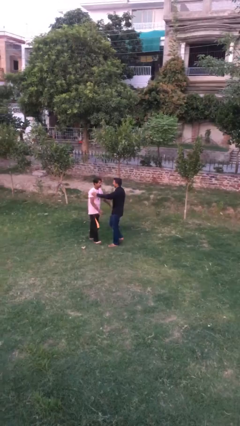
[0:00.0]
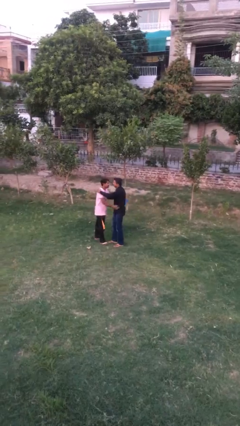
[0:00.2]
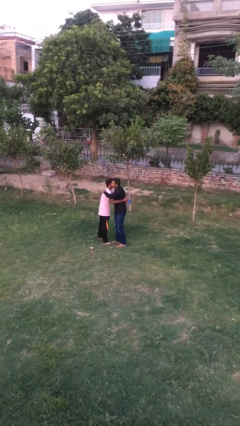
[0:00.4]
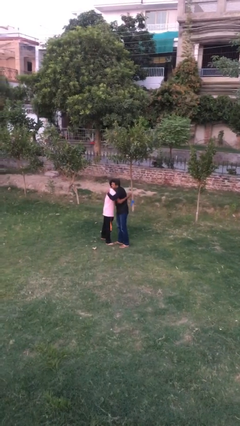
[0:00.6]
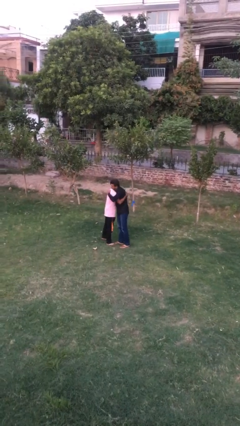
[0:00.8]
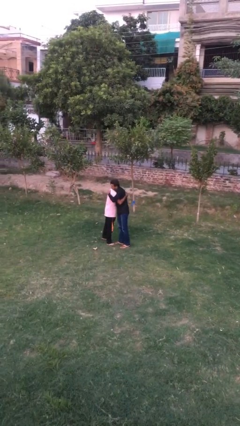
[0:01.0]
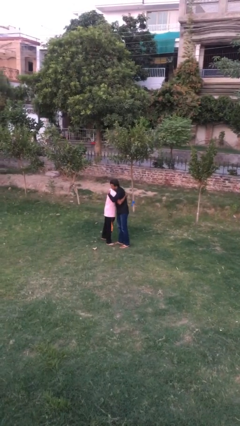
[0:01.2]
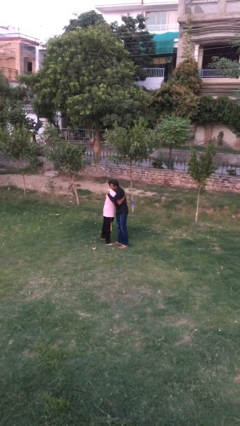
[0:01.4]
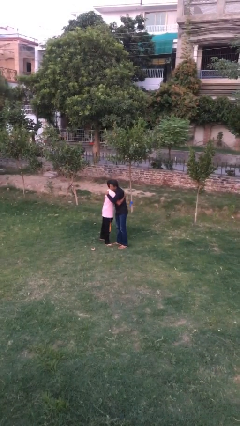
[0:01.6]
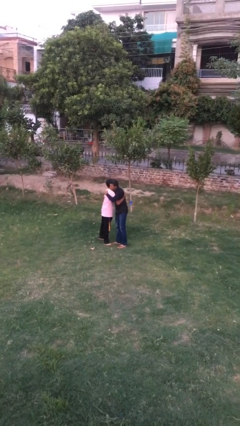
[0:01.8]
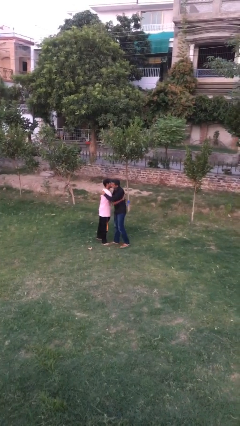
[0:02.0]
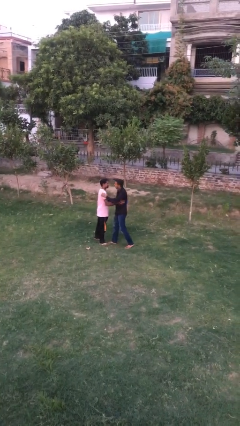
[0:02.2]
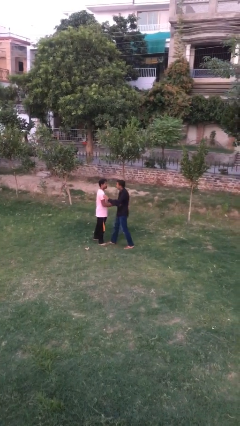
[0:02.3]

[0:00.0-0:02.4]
person embraces person

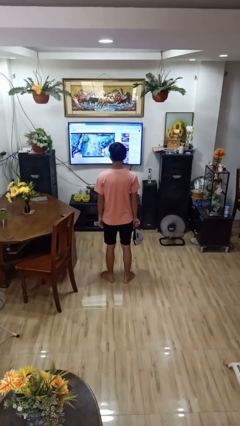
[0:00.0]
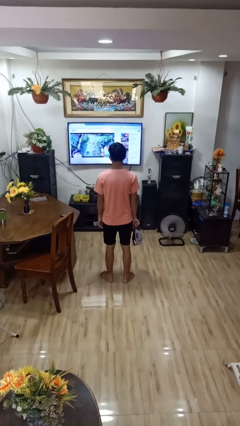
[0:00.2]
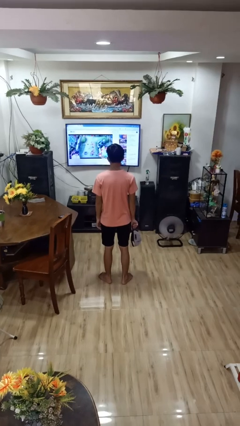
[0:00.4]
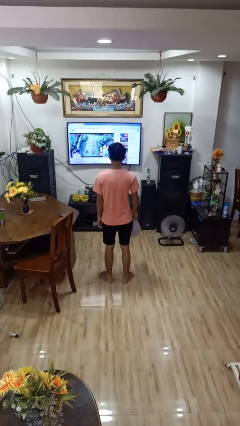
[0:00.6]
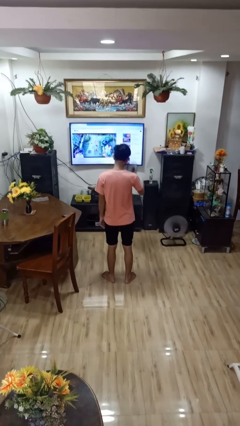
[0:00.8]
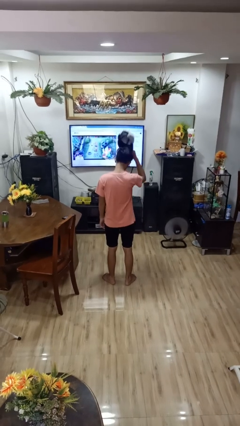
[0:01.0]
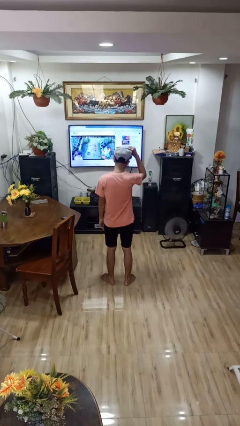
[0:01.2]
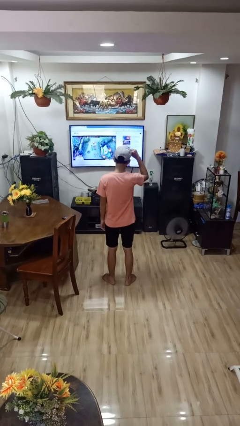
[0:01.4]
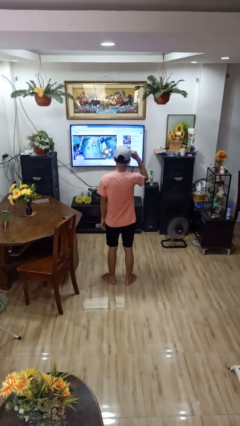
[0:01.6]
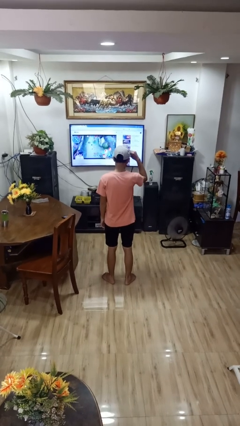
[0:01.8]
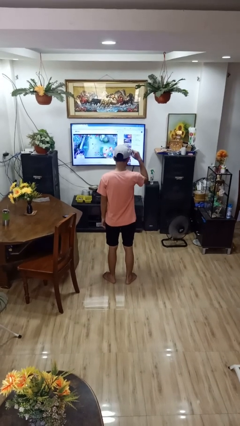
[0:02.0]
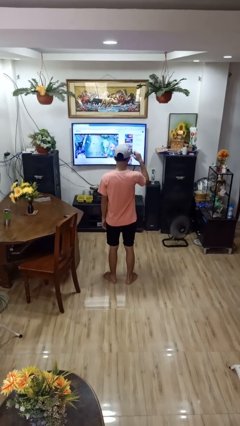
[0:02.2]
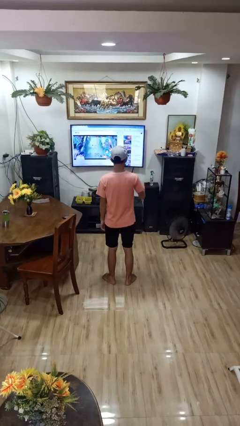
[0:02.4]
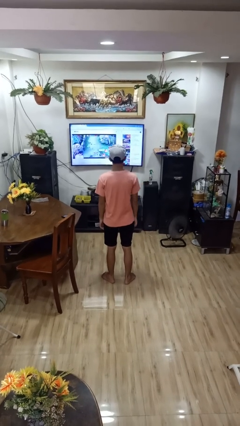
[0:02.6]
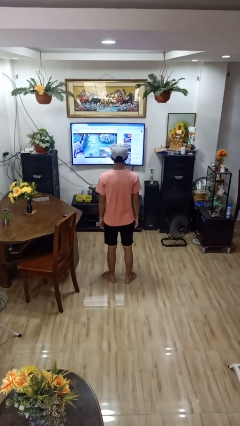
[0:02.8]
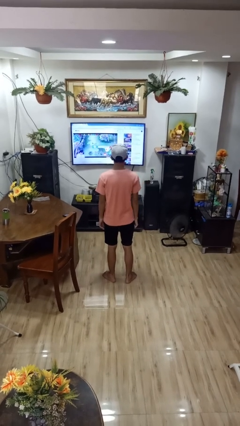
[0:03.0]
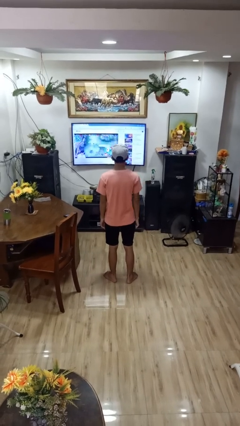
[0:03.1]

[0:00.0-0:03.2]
person puts on hat

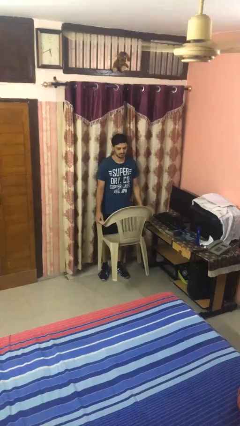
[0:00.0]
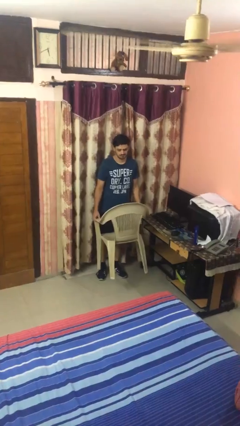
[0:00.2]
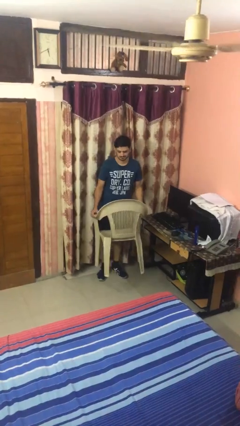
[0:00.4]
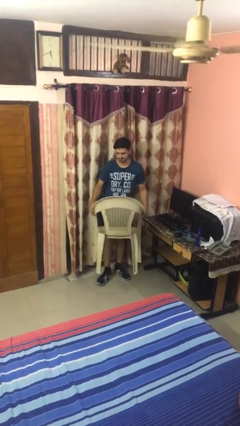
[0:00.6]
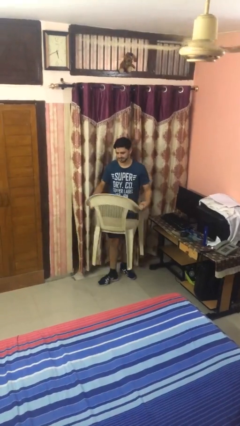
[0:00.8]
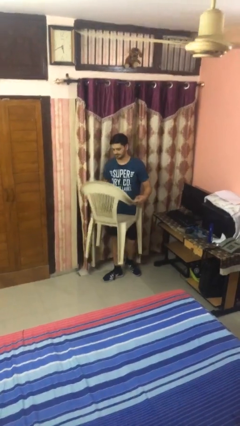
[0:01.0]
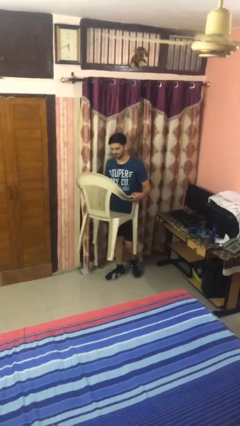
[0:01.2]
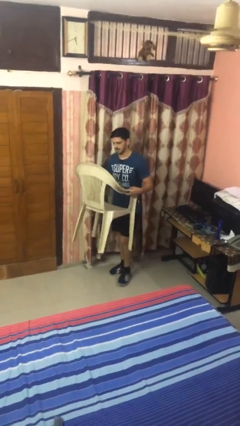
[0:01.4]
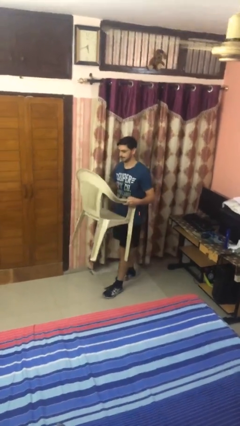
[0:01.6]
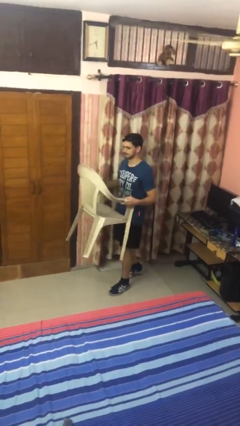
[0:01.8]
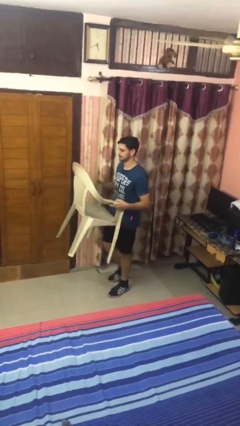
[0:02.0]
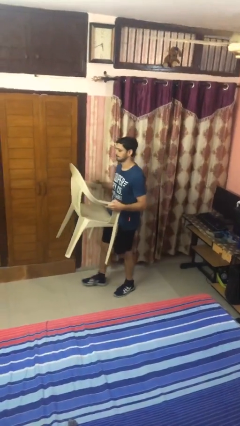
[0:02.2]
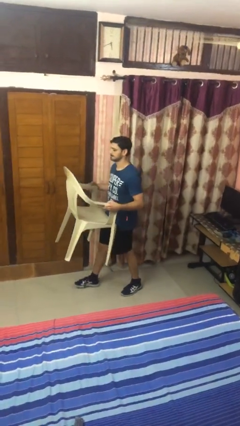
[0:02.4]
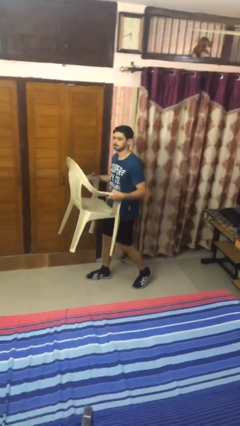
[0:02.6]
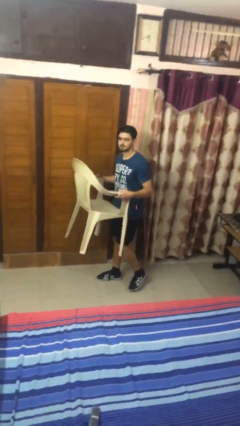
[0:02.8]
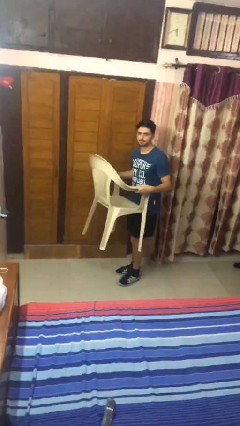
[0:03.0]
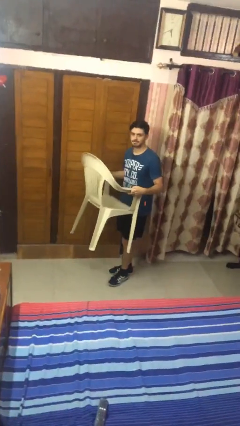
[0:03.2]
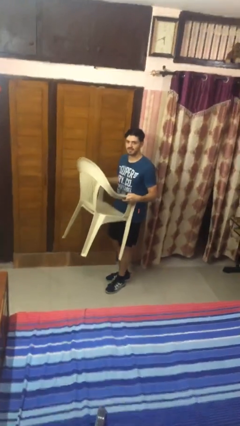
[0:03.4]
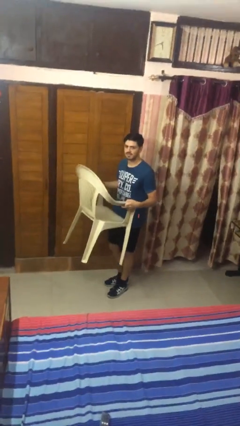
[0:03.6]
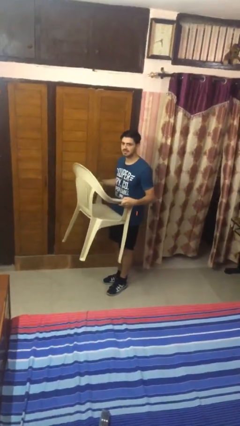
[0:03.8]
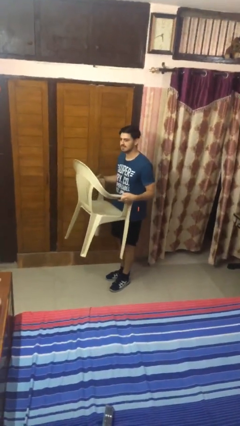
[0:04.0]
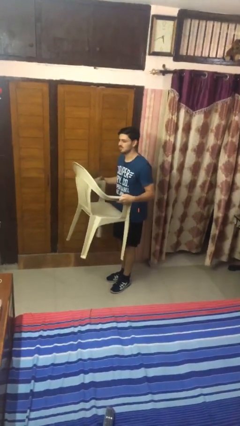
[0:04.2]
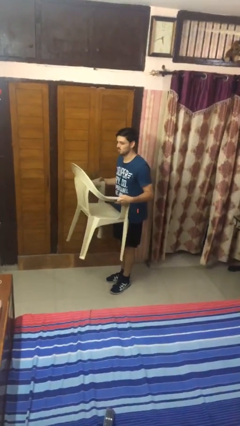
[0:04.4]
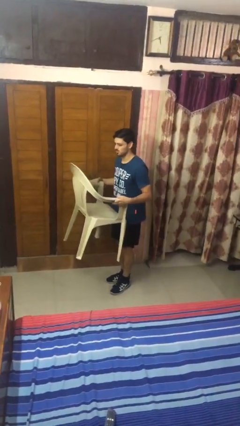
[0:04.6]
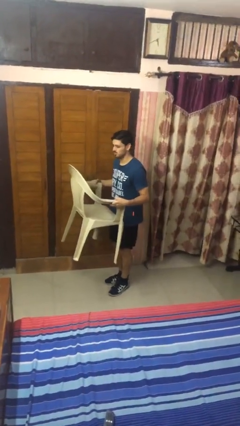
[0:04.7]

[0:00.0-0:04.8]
person carries furniture

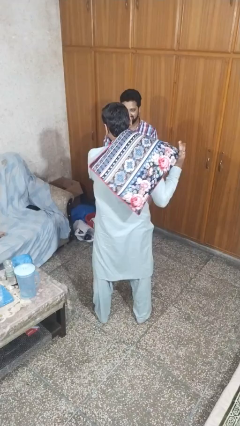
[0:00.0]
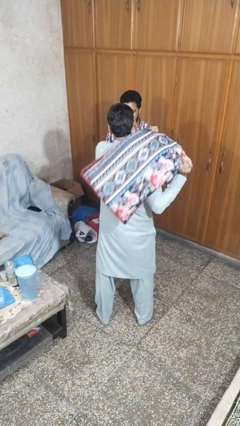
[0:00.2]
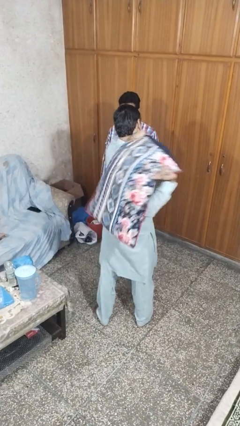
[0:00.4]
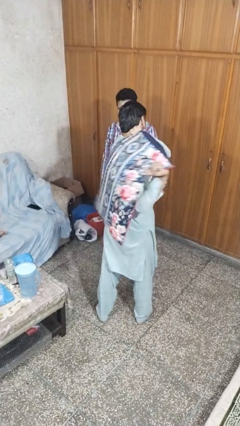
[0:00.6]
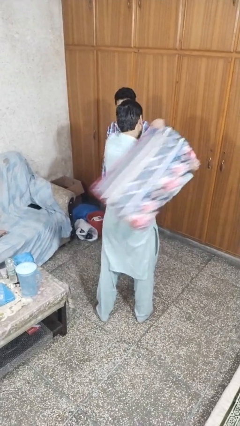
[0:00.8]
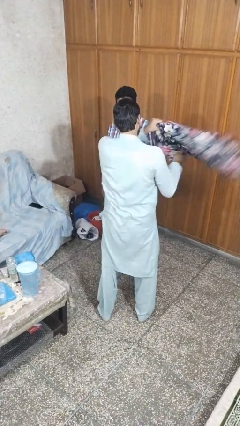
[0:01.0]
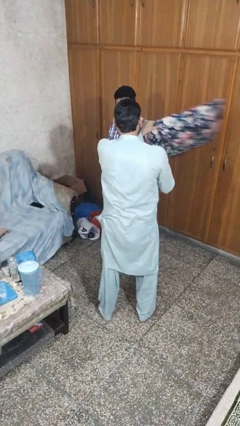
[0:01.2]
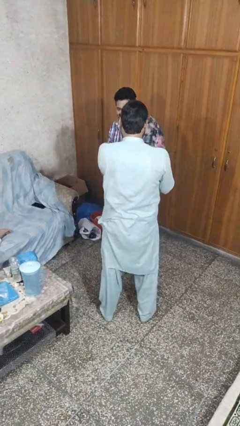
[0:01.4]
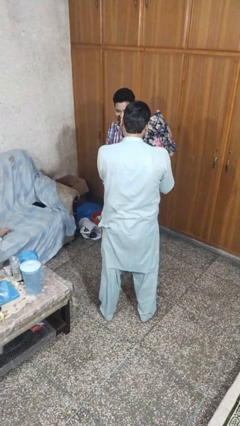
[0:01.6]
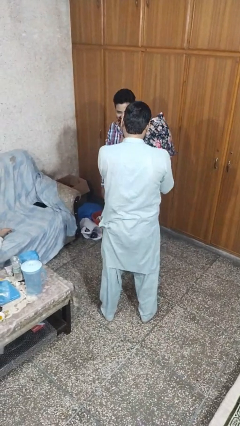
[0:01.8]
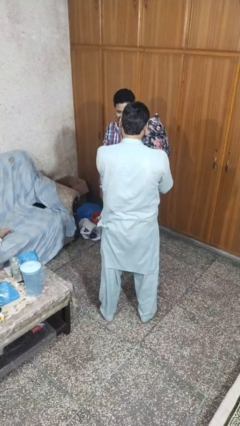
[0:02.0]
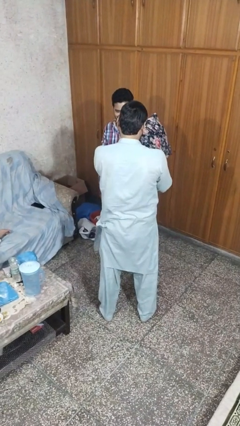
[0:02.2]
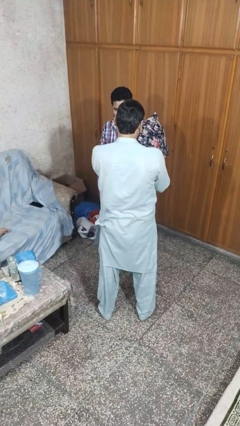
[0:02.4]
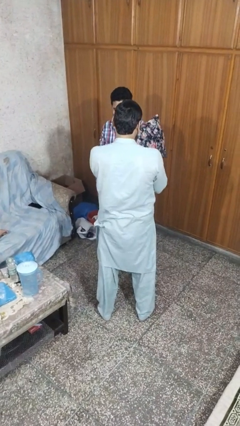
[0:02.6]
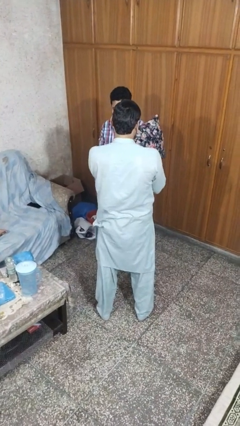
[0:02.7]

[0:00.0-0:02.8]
person hits person with pillow

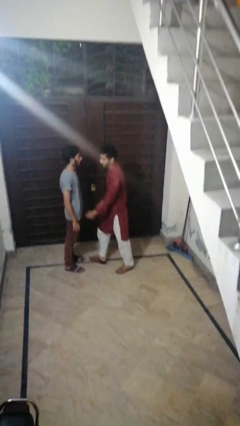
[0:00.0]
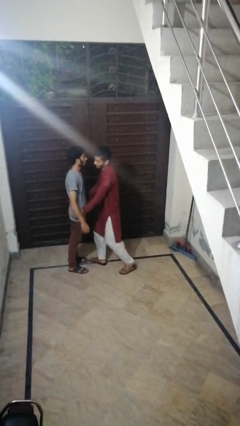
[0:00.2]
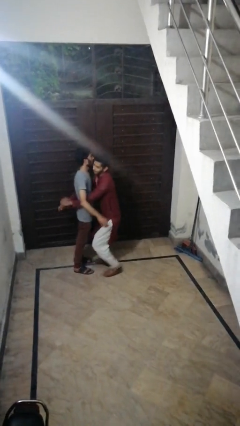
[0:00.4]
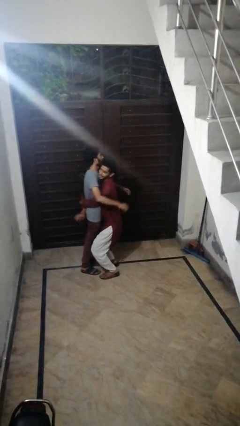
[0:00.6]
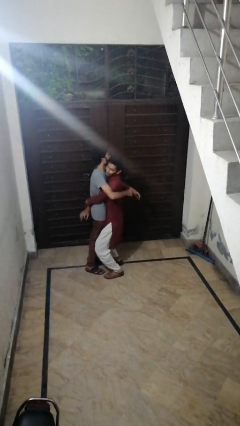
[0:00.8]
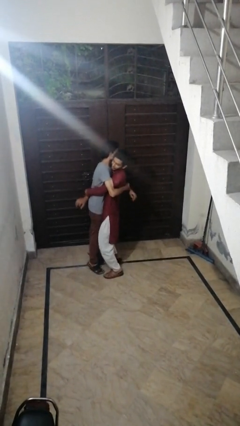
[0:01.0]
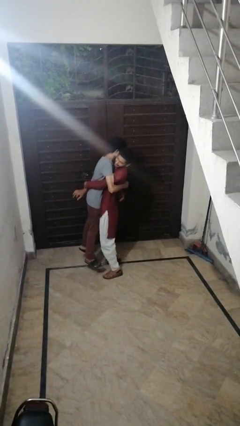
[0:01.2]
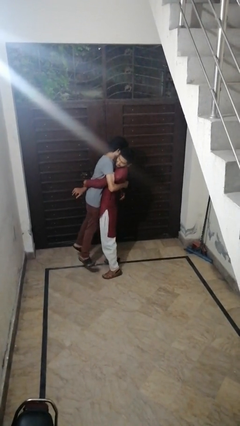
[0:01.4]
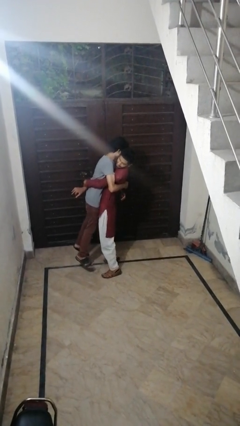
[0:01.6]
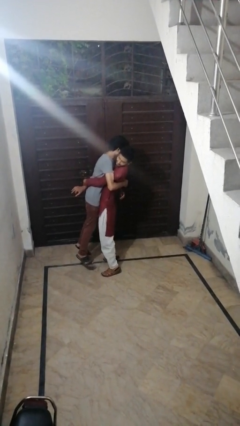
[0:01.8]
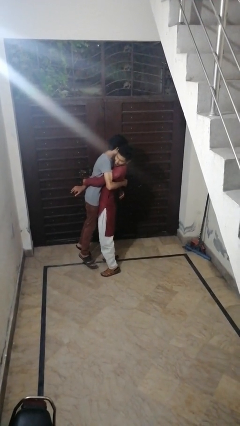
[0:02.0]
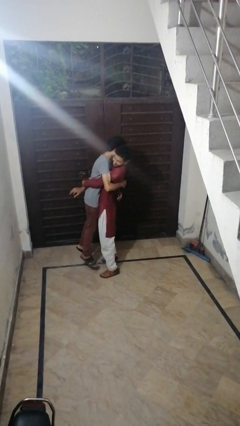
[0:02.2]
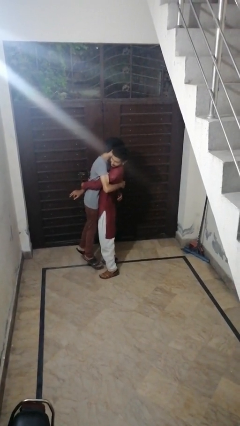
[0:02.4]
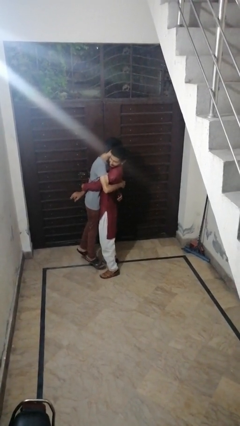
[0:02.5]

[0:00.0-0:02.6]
person picks up person

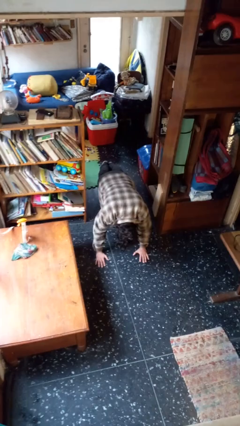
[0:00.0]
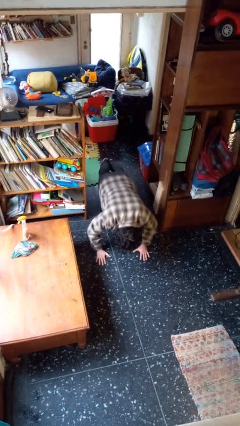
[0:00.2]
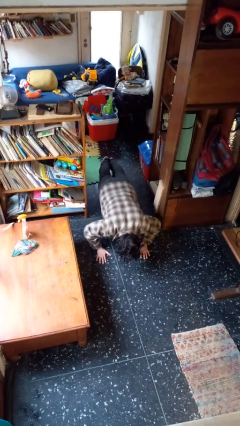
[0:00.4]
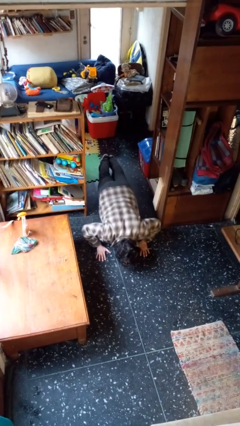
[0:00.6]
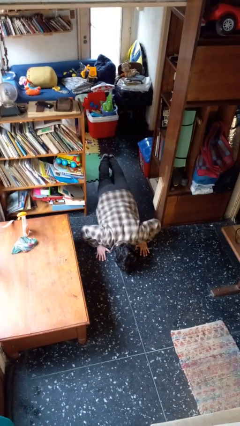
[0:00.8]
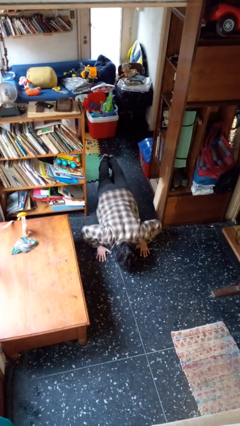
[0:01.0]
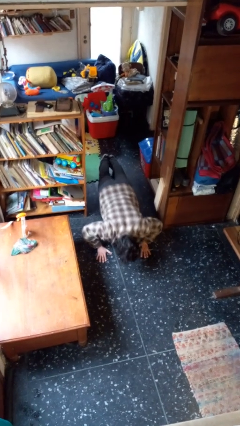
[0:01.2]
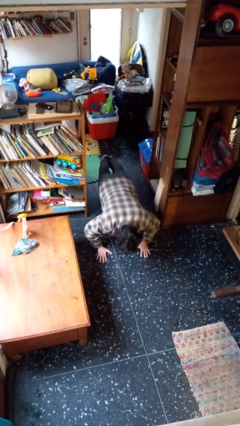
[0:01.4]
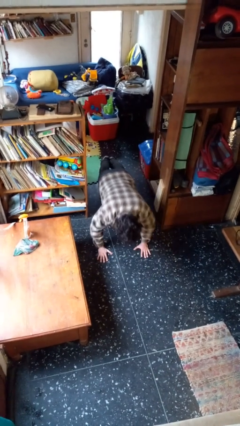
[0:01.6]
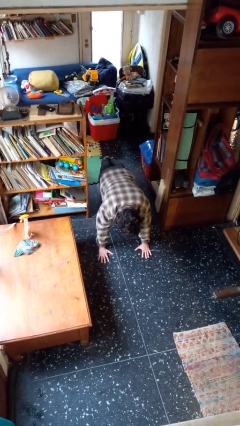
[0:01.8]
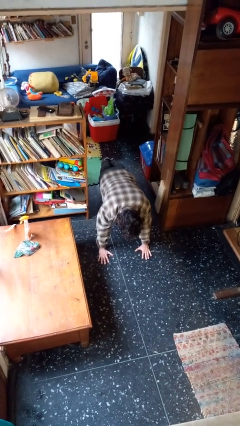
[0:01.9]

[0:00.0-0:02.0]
person exercises with pushup
